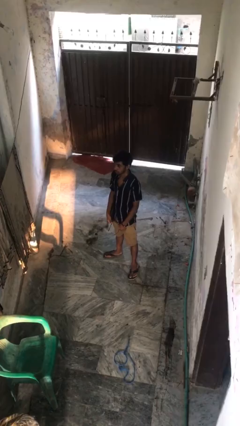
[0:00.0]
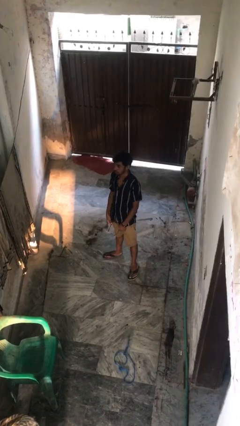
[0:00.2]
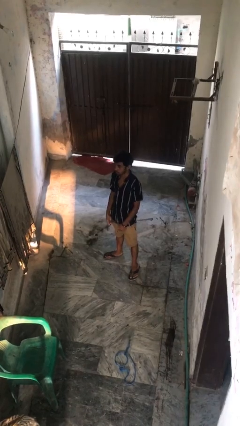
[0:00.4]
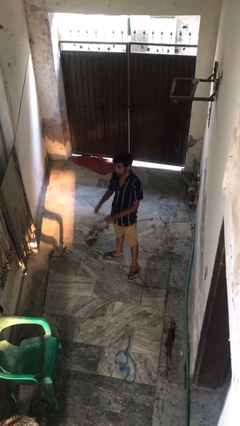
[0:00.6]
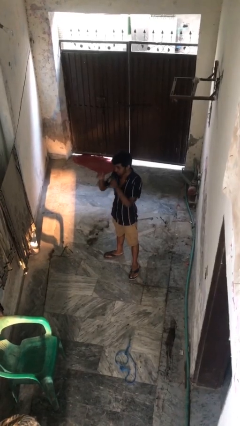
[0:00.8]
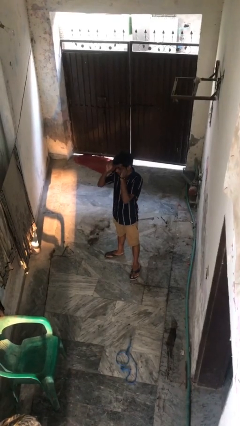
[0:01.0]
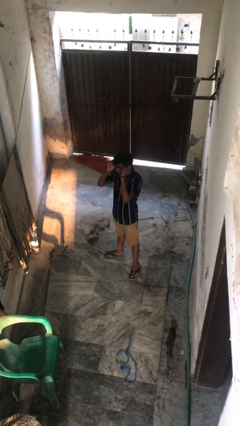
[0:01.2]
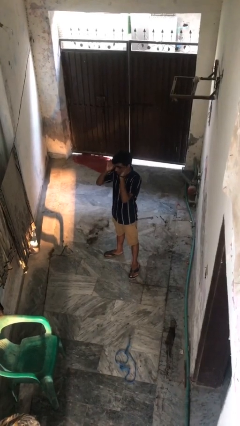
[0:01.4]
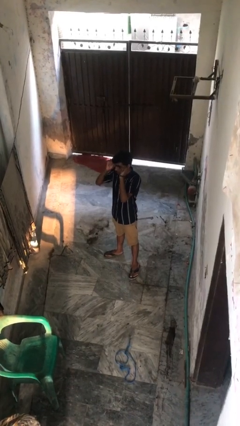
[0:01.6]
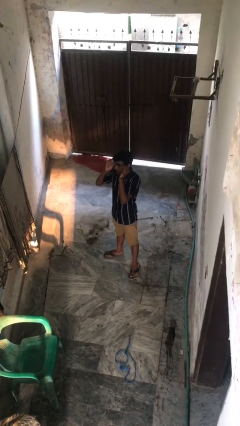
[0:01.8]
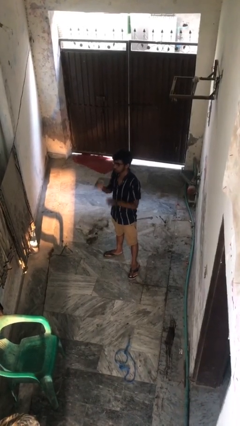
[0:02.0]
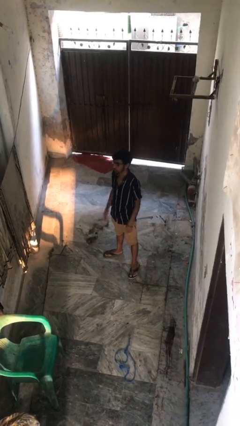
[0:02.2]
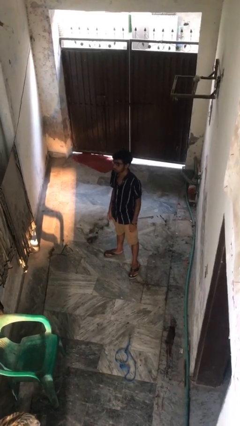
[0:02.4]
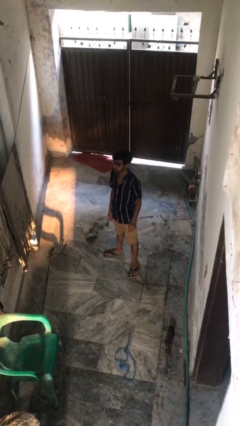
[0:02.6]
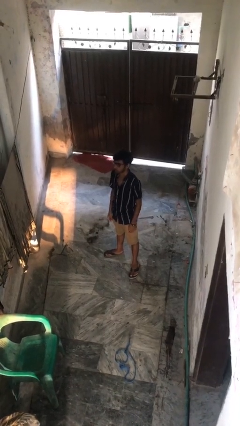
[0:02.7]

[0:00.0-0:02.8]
person puts on glasses

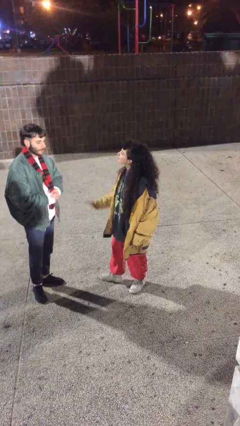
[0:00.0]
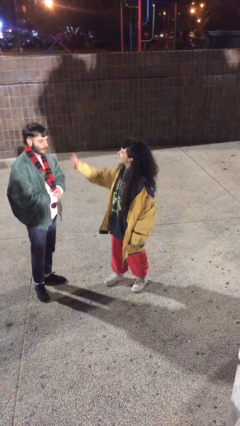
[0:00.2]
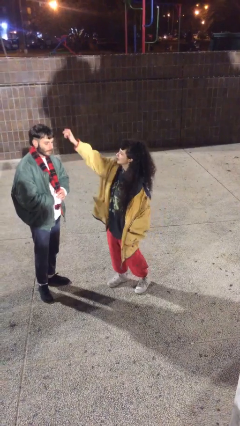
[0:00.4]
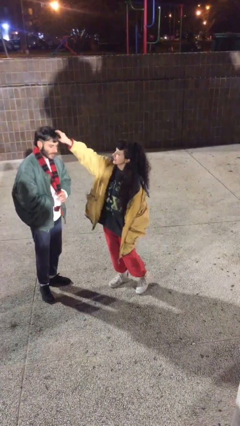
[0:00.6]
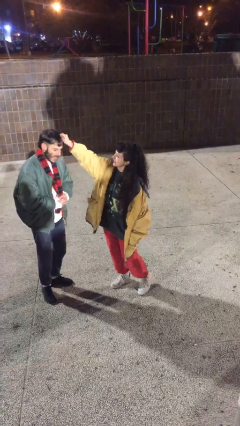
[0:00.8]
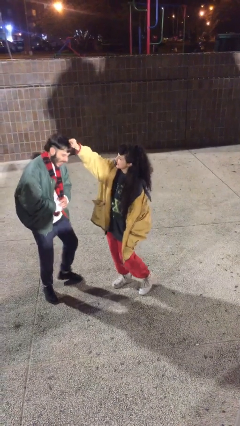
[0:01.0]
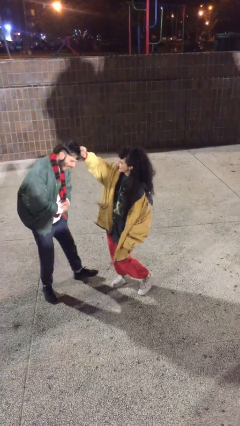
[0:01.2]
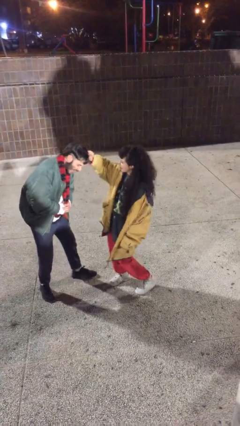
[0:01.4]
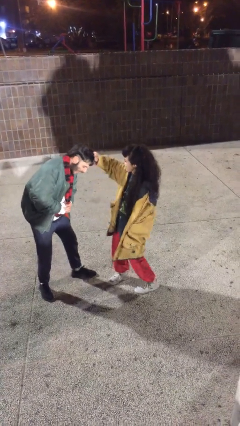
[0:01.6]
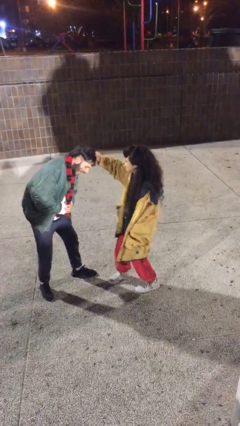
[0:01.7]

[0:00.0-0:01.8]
person grabs person by hair

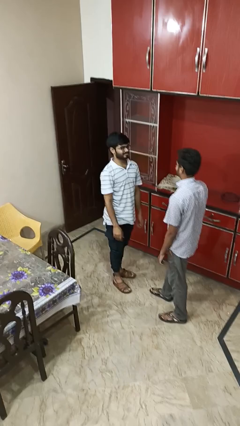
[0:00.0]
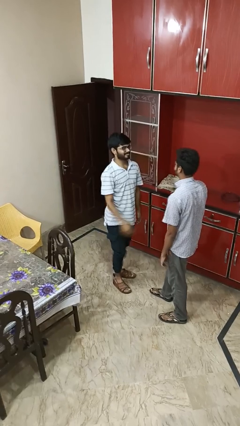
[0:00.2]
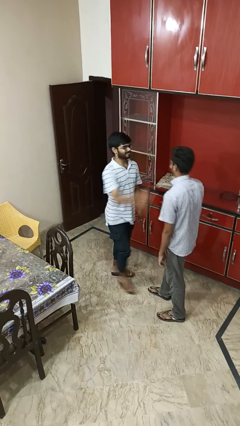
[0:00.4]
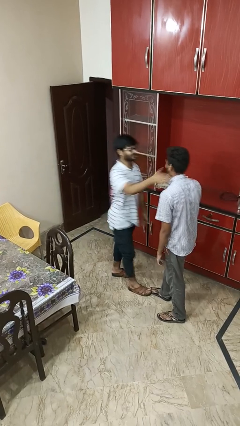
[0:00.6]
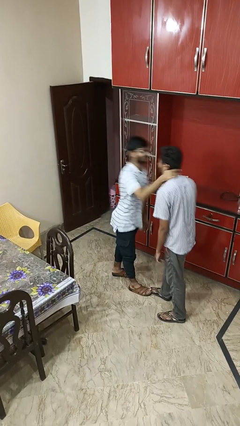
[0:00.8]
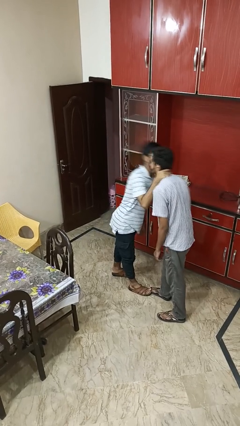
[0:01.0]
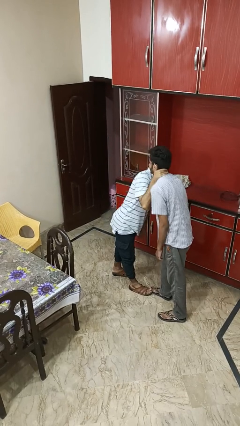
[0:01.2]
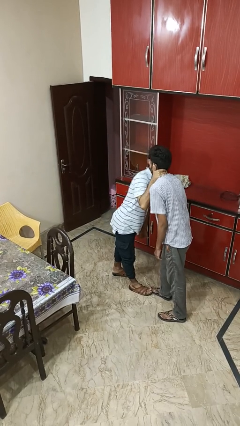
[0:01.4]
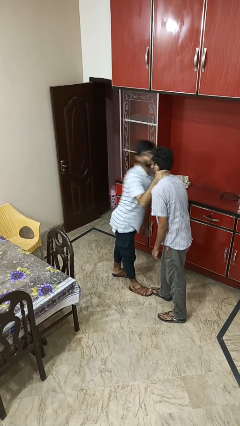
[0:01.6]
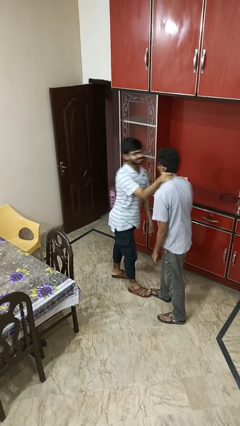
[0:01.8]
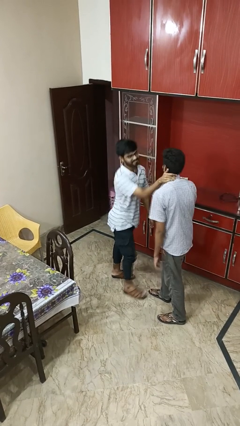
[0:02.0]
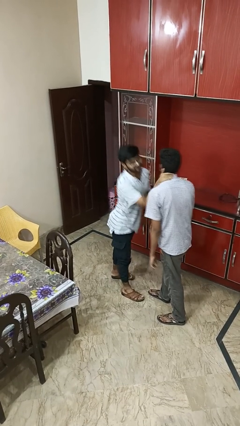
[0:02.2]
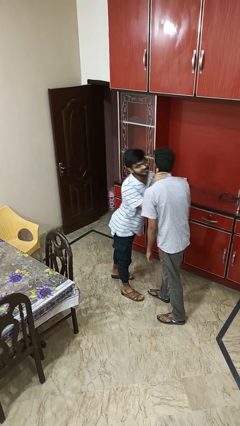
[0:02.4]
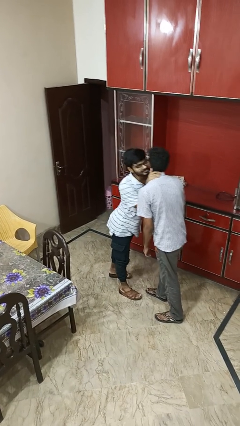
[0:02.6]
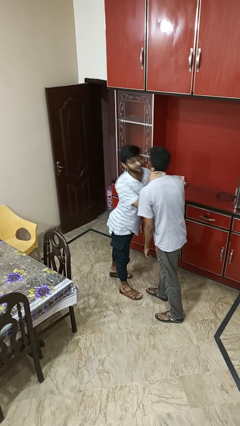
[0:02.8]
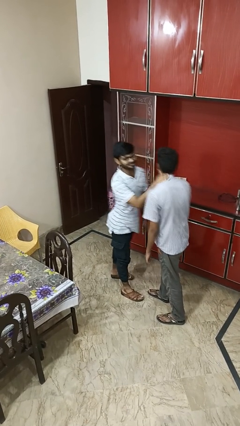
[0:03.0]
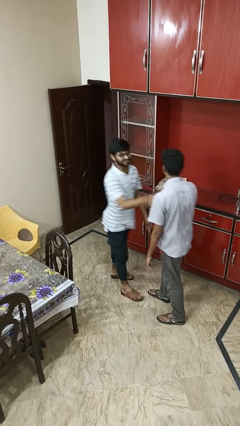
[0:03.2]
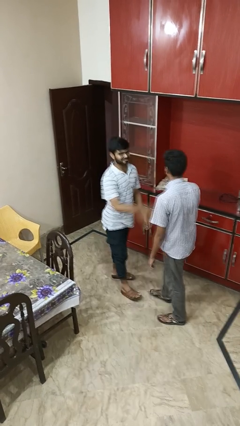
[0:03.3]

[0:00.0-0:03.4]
person kisses cheek of person

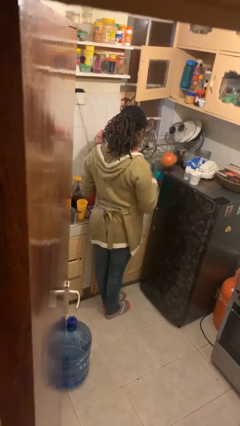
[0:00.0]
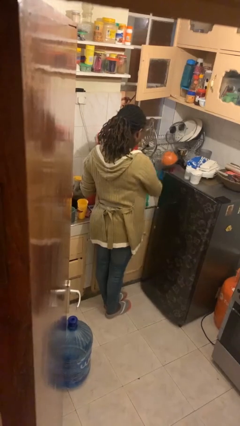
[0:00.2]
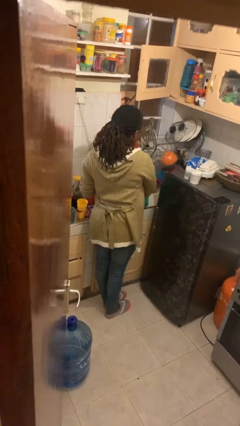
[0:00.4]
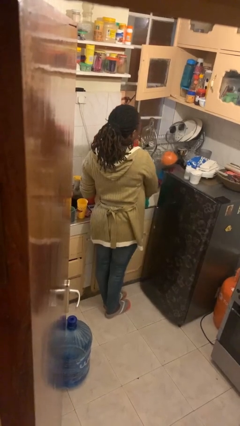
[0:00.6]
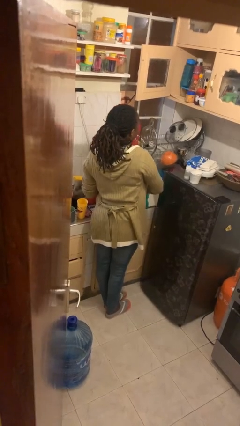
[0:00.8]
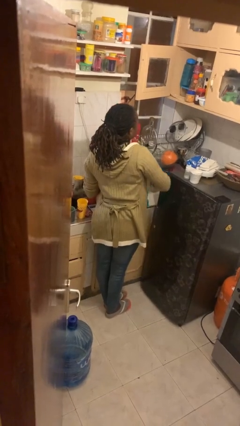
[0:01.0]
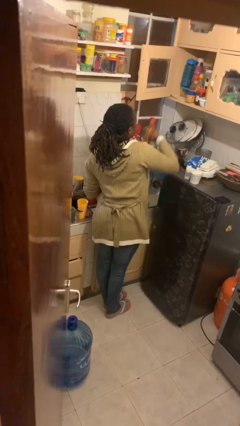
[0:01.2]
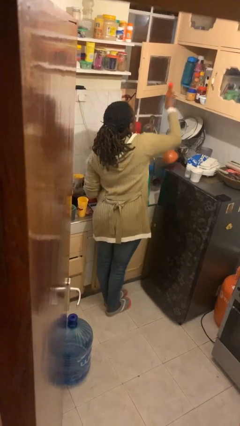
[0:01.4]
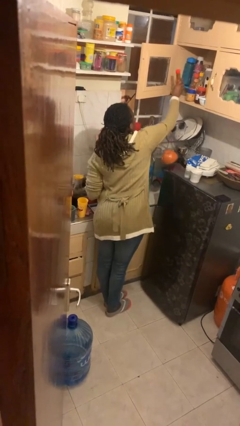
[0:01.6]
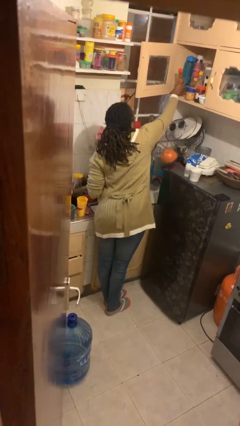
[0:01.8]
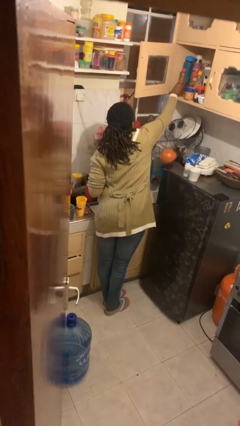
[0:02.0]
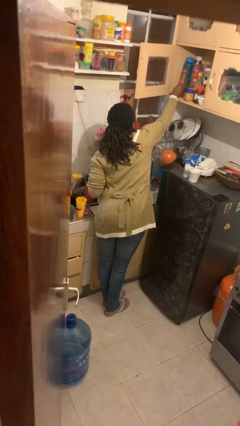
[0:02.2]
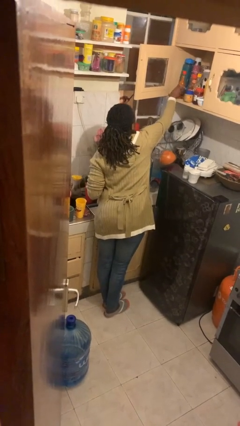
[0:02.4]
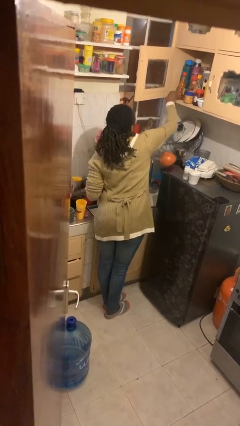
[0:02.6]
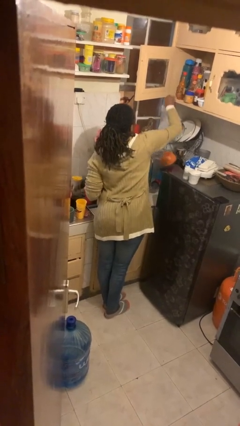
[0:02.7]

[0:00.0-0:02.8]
person loads groceries into cabinet

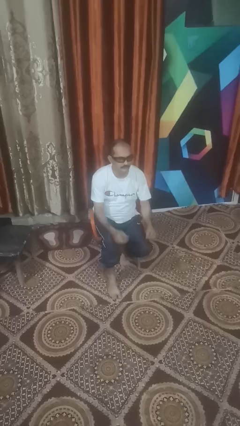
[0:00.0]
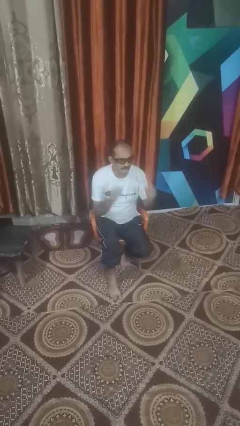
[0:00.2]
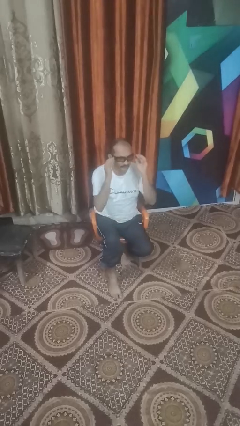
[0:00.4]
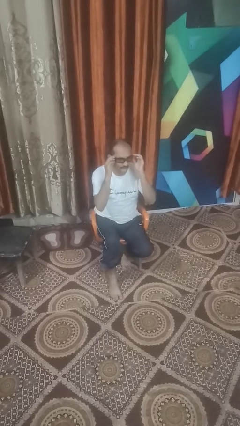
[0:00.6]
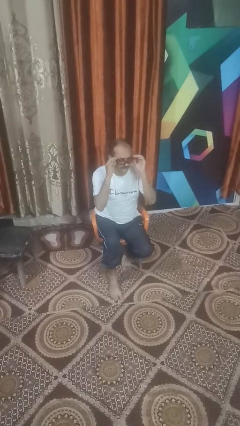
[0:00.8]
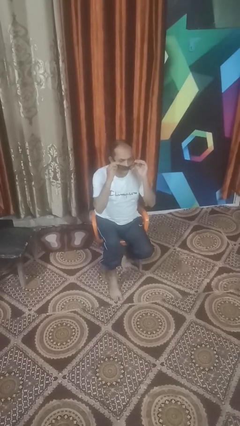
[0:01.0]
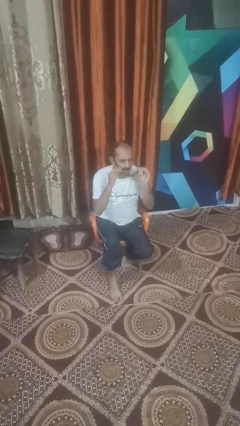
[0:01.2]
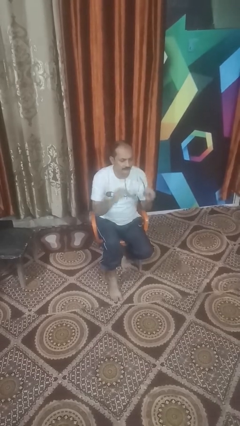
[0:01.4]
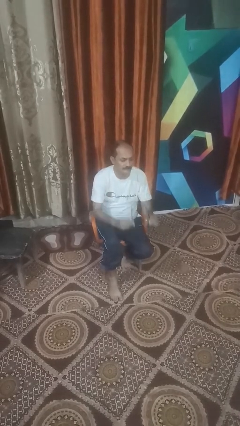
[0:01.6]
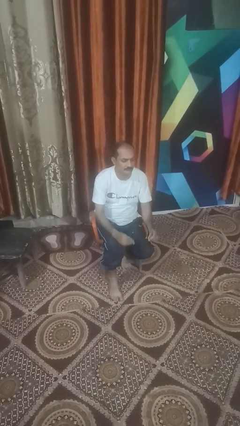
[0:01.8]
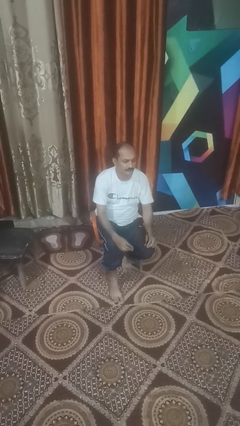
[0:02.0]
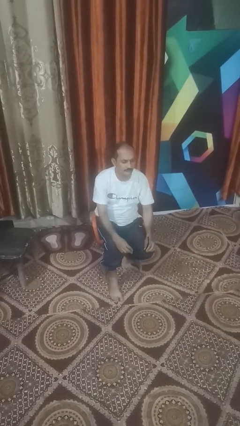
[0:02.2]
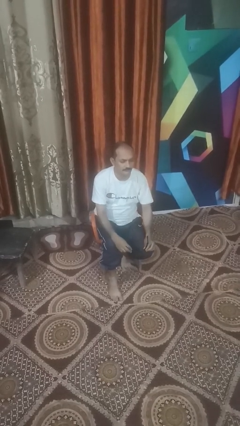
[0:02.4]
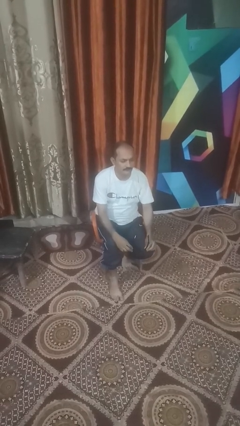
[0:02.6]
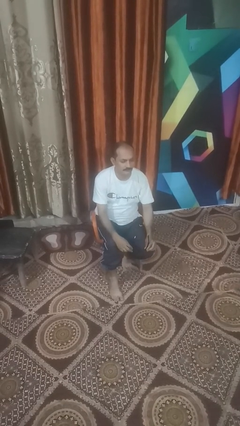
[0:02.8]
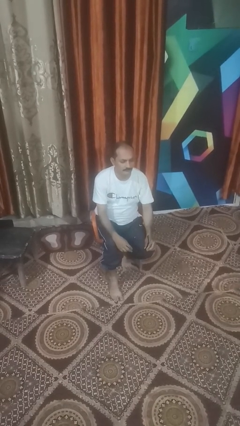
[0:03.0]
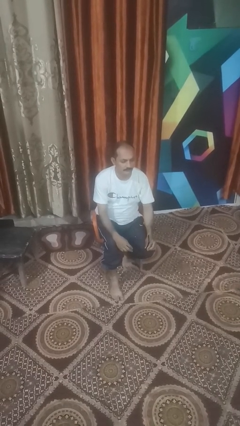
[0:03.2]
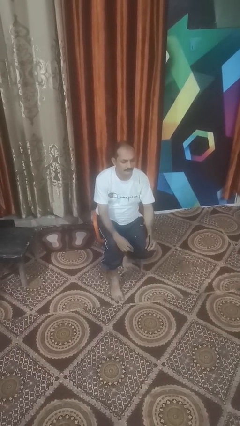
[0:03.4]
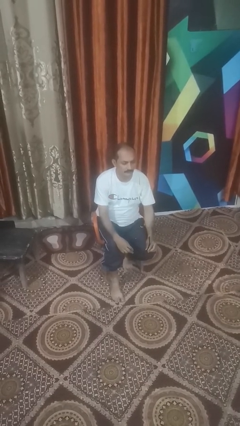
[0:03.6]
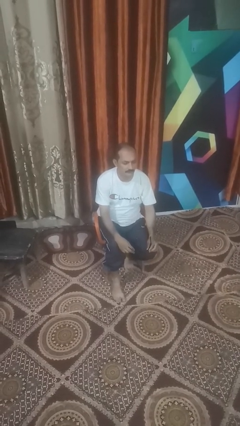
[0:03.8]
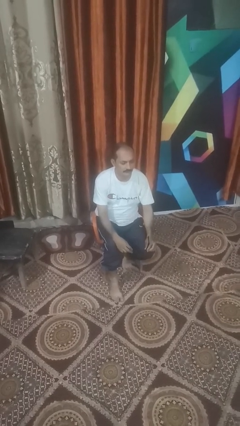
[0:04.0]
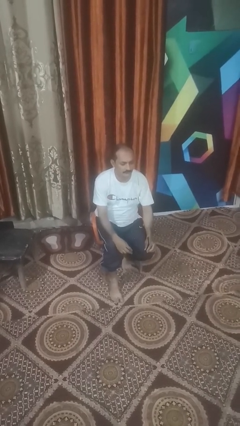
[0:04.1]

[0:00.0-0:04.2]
person takes off sunglasses

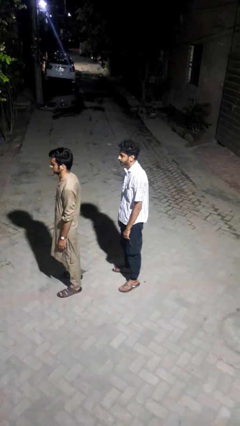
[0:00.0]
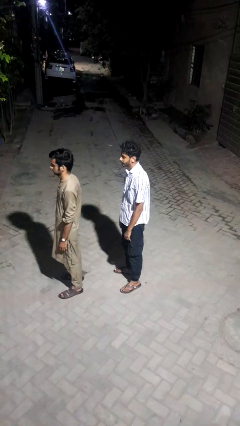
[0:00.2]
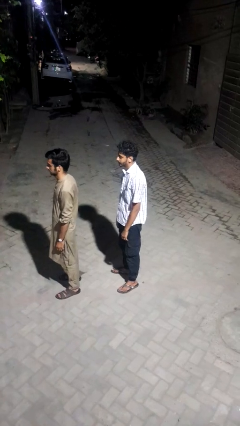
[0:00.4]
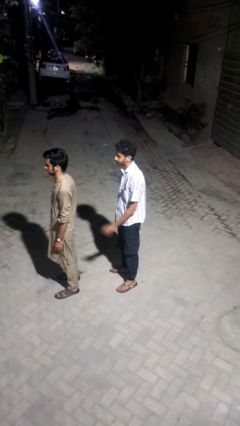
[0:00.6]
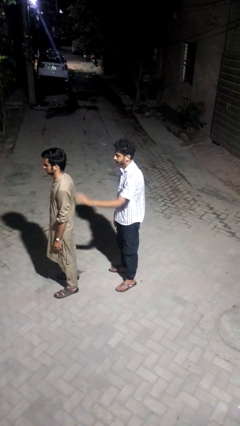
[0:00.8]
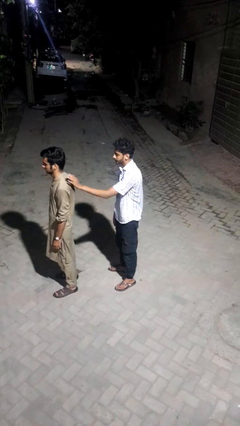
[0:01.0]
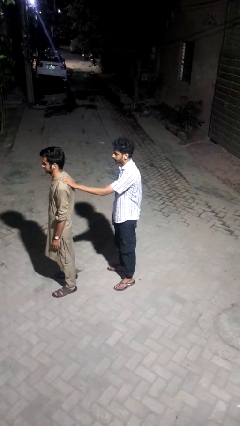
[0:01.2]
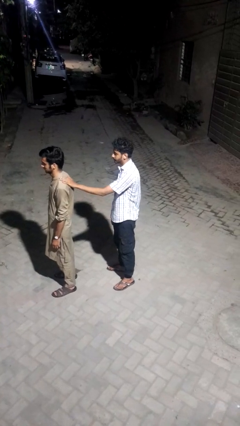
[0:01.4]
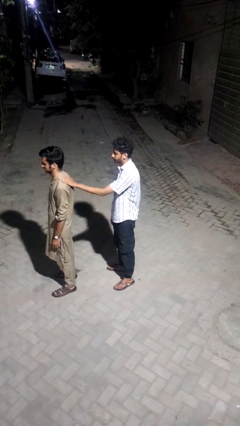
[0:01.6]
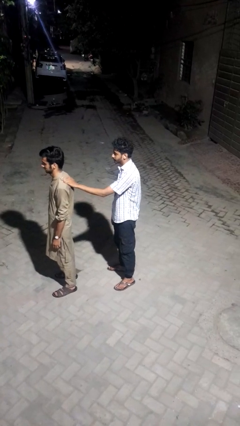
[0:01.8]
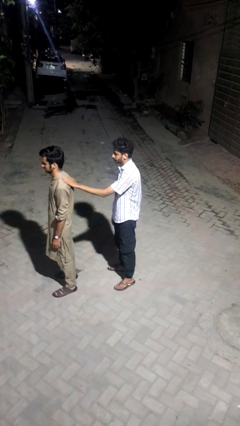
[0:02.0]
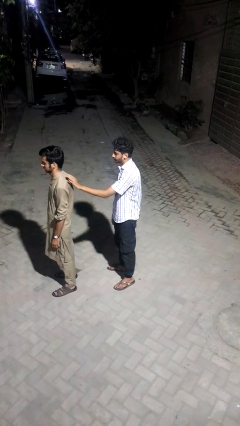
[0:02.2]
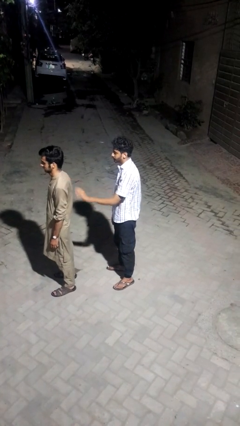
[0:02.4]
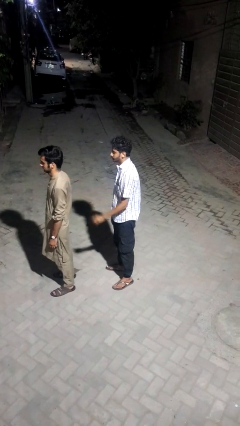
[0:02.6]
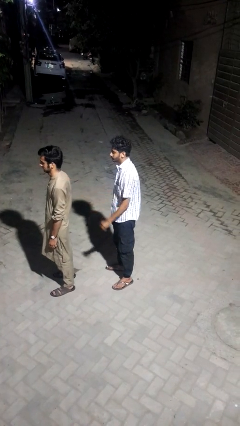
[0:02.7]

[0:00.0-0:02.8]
person touches back of person
